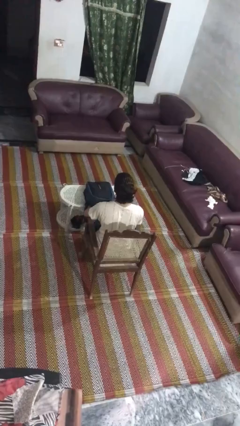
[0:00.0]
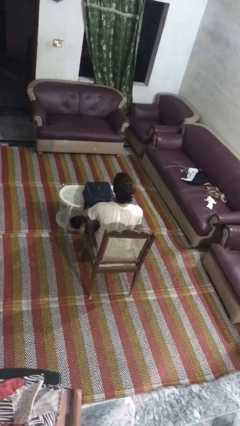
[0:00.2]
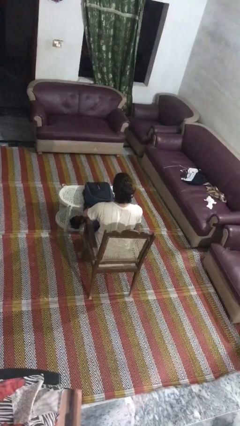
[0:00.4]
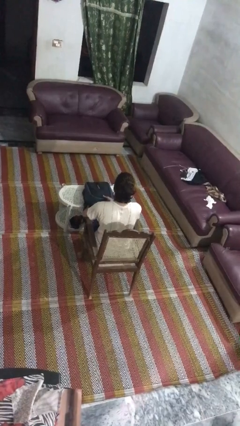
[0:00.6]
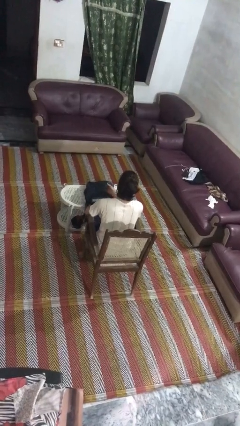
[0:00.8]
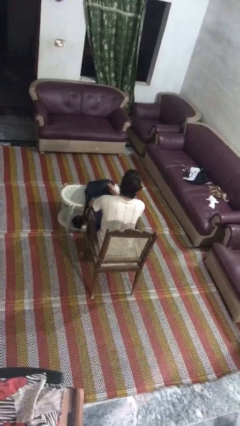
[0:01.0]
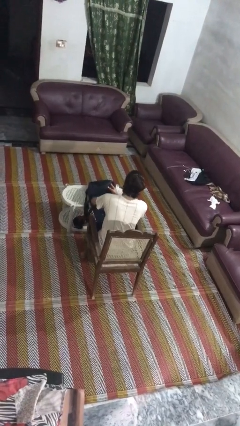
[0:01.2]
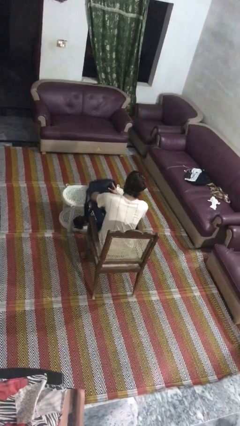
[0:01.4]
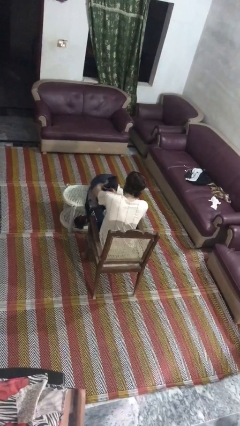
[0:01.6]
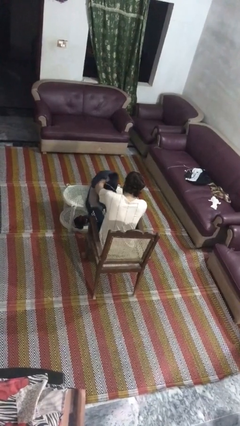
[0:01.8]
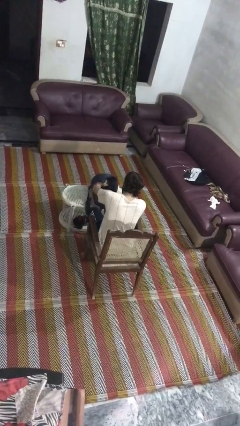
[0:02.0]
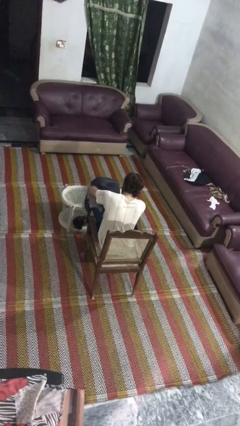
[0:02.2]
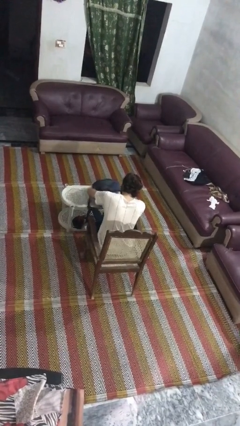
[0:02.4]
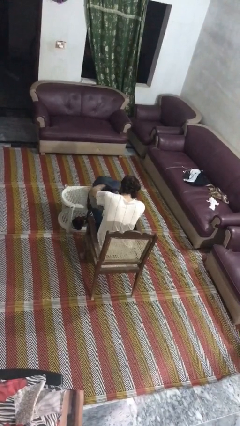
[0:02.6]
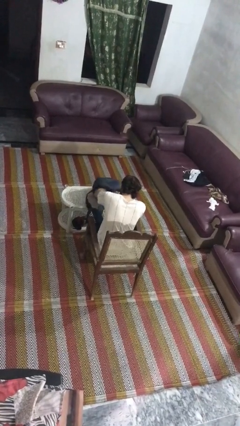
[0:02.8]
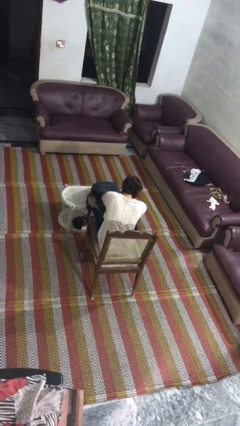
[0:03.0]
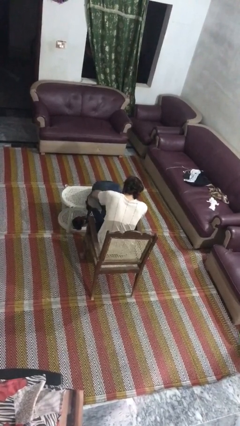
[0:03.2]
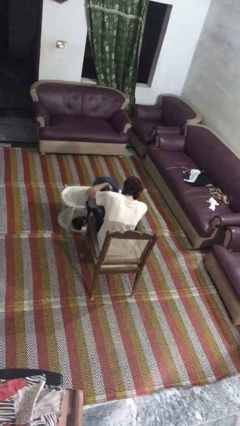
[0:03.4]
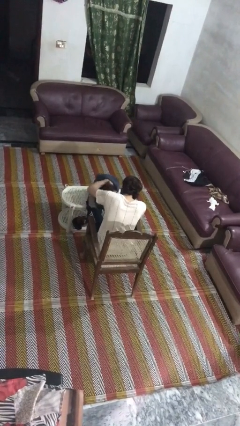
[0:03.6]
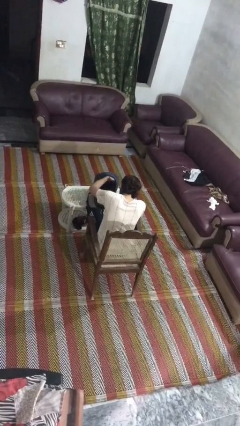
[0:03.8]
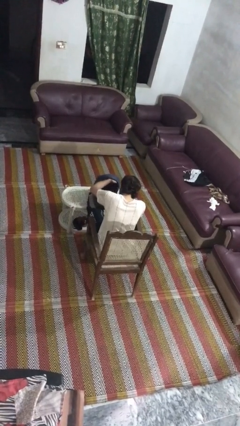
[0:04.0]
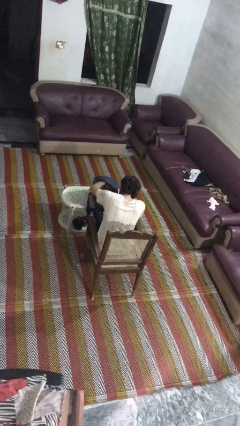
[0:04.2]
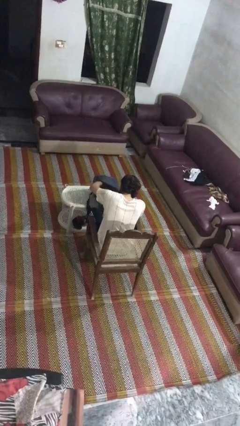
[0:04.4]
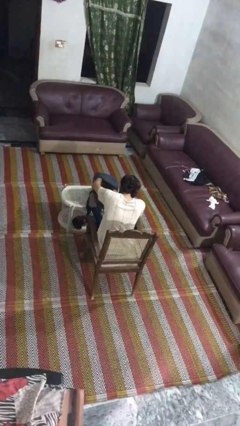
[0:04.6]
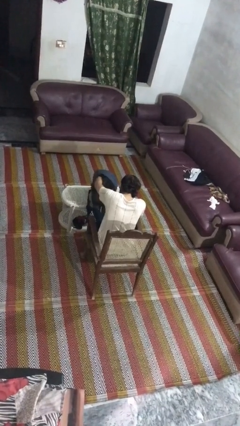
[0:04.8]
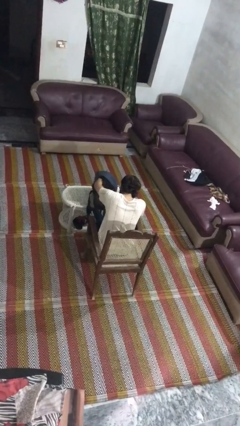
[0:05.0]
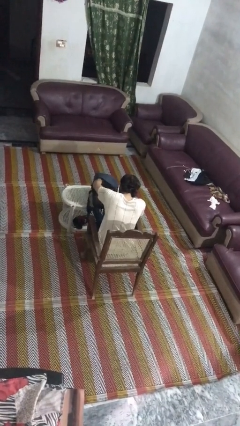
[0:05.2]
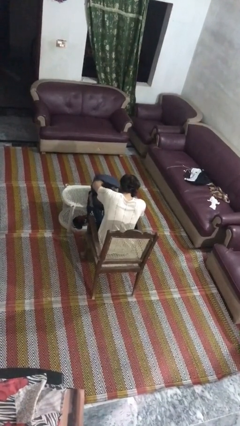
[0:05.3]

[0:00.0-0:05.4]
person searches in backpack

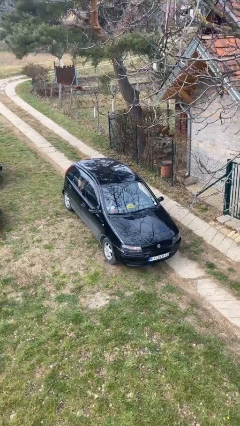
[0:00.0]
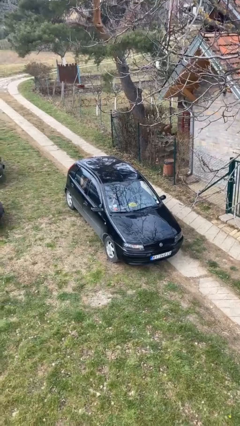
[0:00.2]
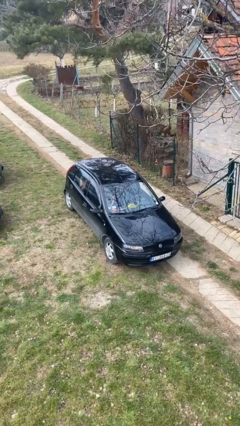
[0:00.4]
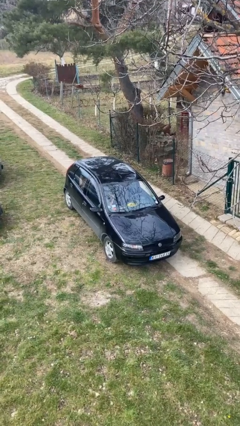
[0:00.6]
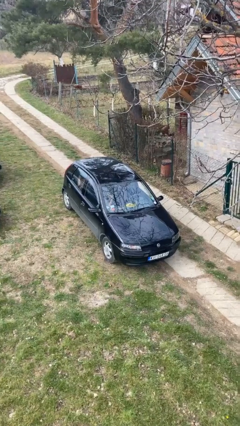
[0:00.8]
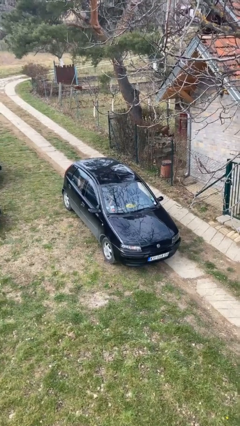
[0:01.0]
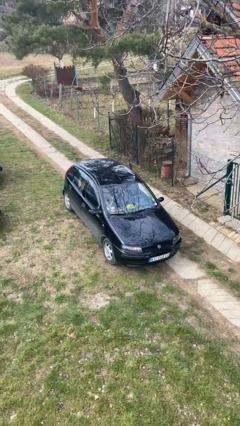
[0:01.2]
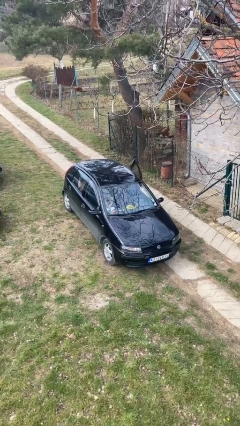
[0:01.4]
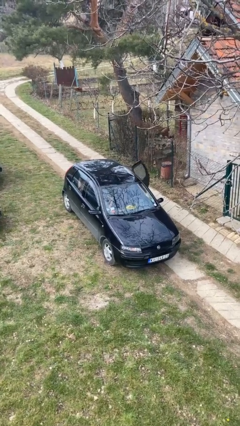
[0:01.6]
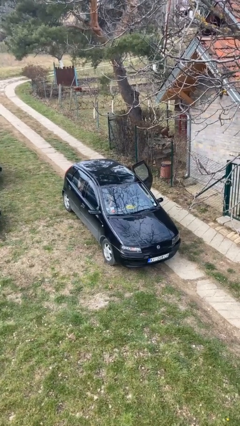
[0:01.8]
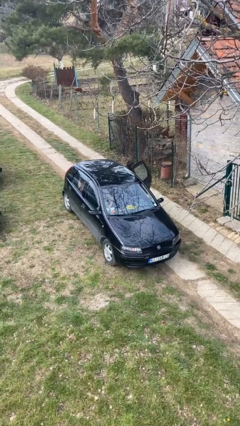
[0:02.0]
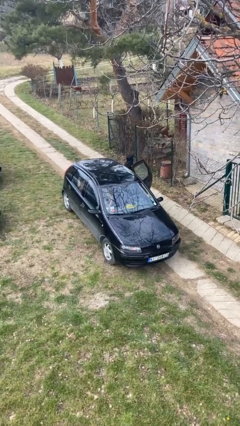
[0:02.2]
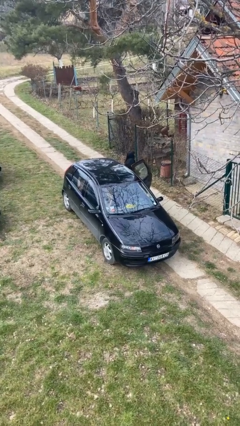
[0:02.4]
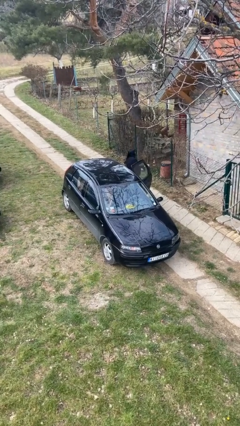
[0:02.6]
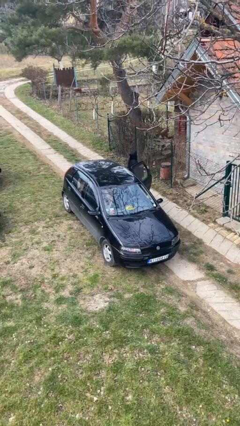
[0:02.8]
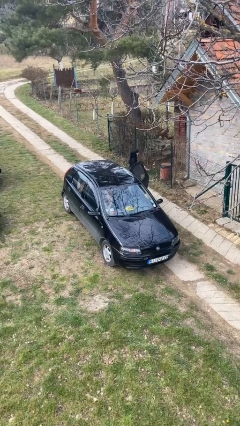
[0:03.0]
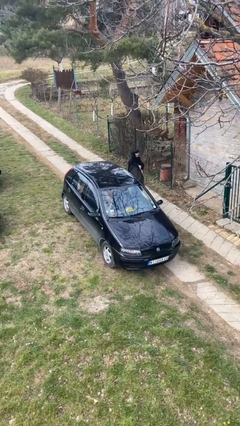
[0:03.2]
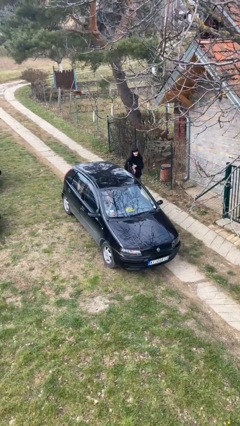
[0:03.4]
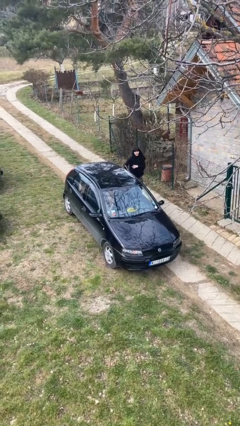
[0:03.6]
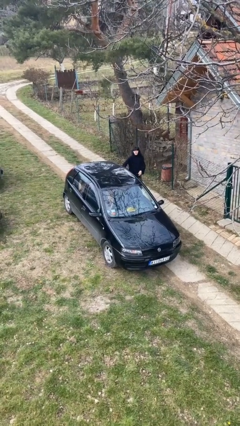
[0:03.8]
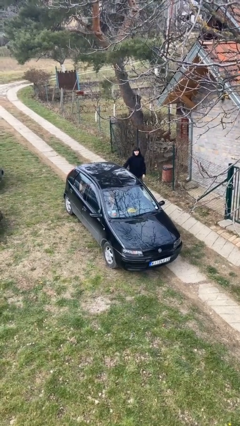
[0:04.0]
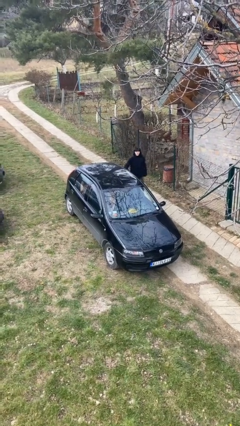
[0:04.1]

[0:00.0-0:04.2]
car drops off person

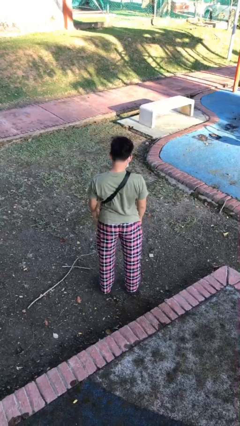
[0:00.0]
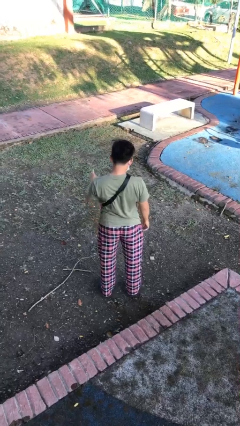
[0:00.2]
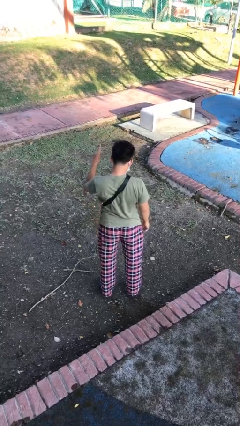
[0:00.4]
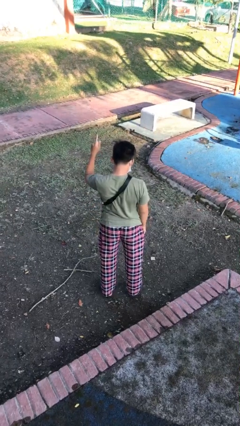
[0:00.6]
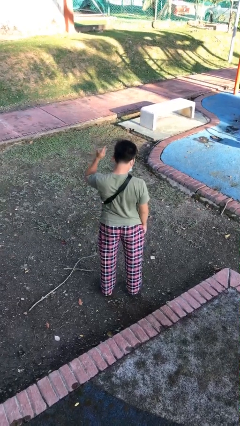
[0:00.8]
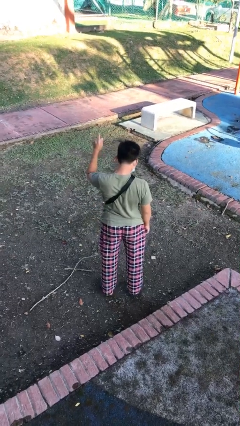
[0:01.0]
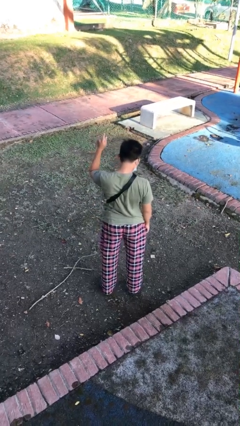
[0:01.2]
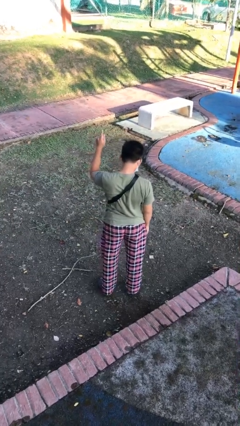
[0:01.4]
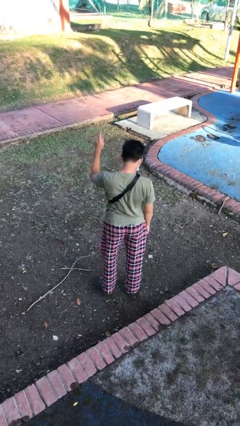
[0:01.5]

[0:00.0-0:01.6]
person gestures number one

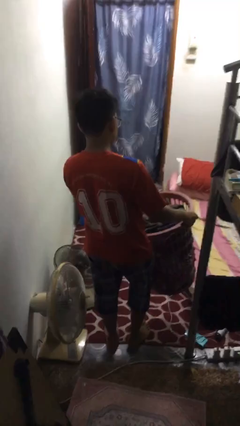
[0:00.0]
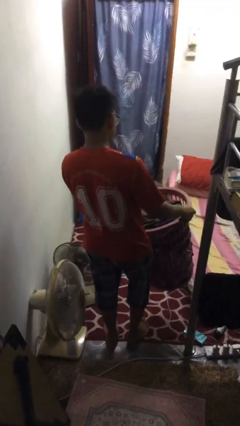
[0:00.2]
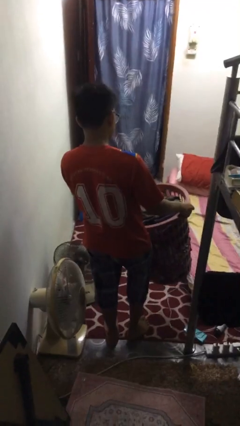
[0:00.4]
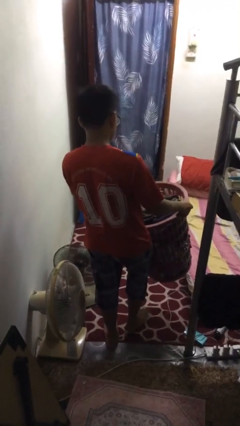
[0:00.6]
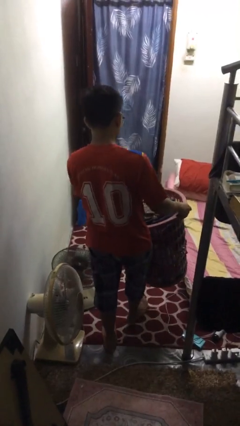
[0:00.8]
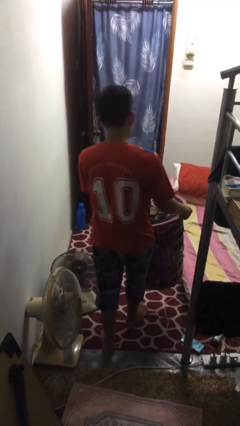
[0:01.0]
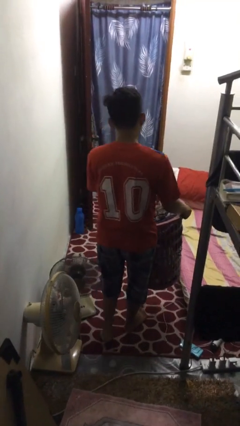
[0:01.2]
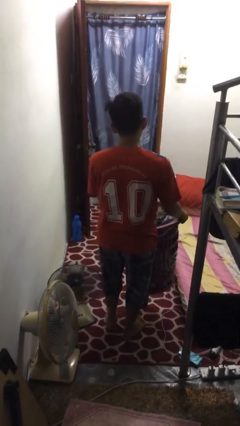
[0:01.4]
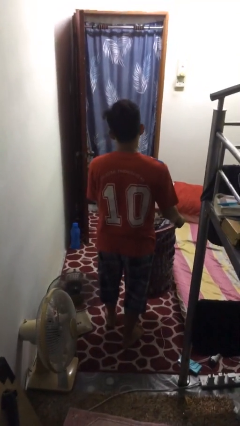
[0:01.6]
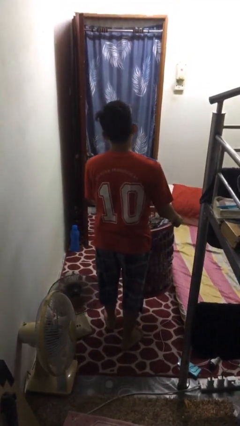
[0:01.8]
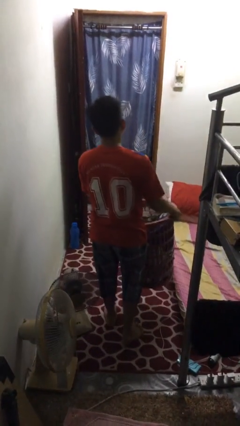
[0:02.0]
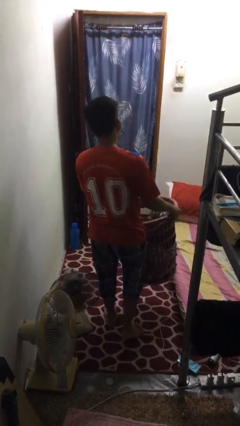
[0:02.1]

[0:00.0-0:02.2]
person carries laundry basket

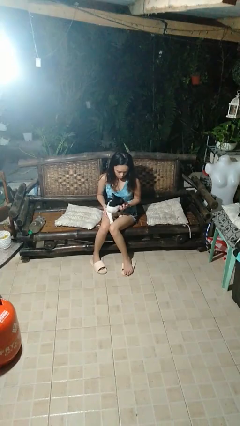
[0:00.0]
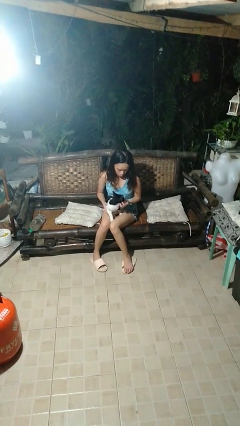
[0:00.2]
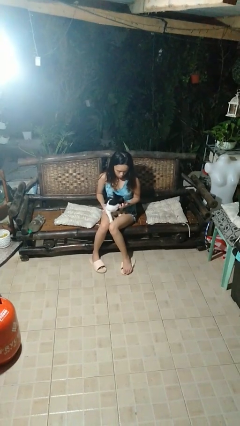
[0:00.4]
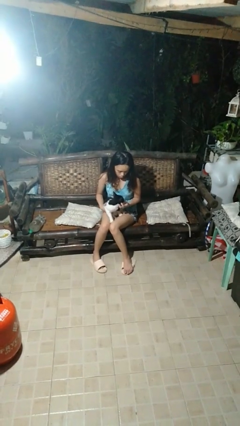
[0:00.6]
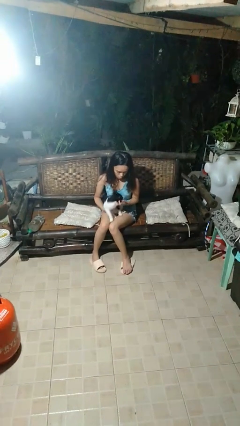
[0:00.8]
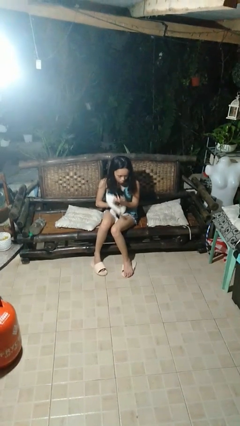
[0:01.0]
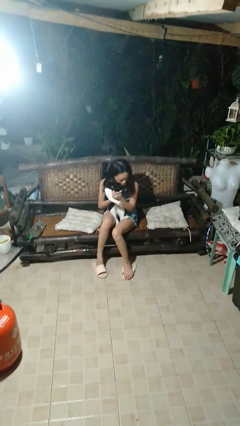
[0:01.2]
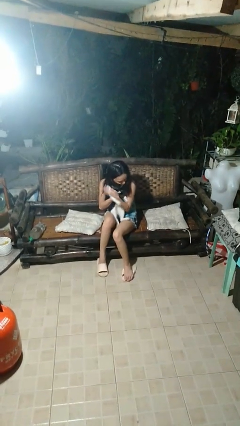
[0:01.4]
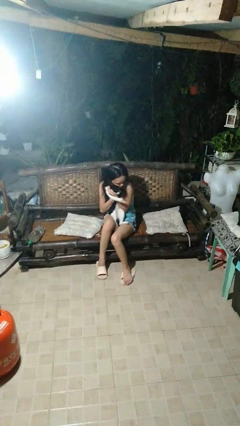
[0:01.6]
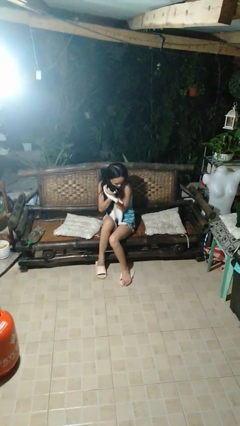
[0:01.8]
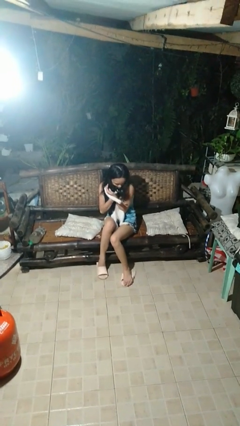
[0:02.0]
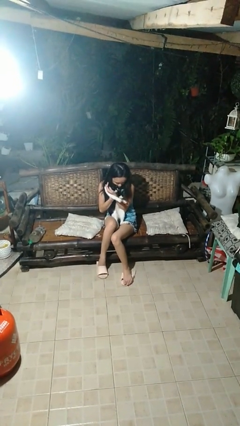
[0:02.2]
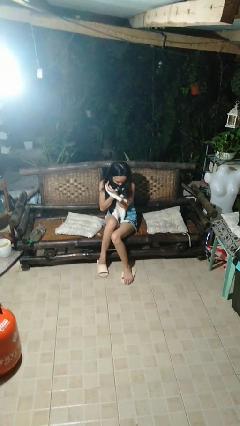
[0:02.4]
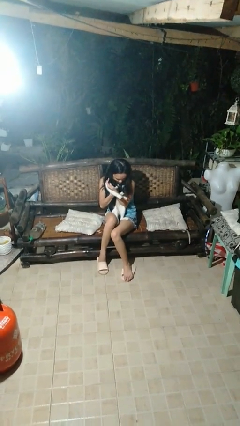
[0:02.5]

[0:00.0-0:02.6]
person hugs cat

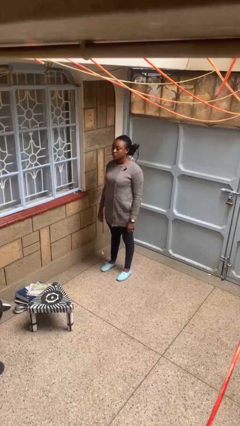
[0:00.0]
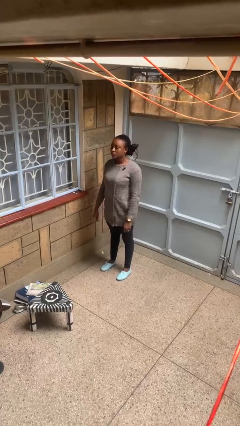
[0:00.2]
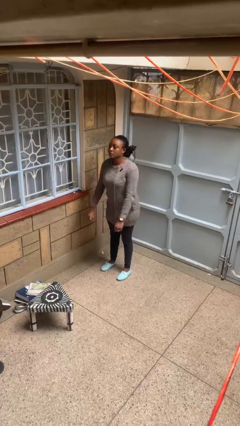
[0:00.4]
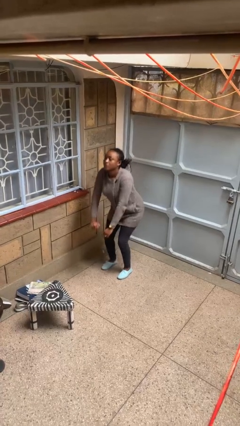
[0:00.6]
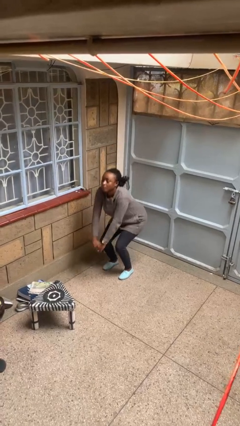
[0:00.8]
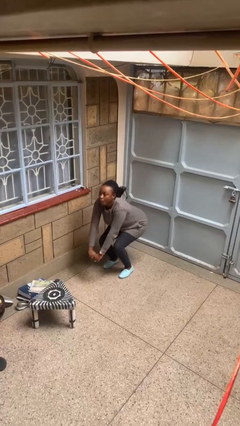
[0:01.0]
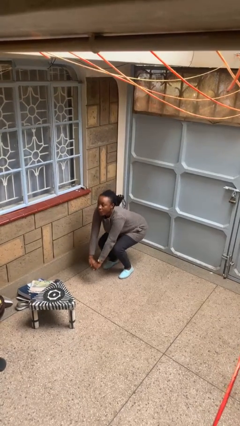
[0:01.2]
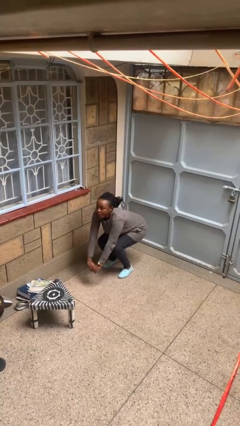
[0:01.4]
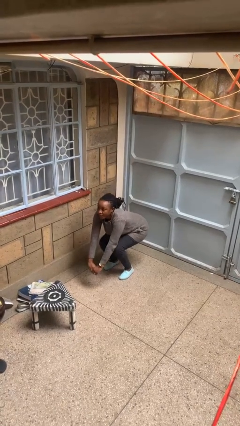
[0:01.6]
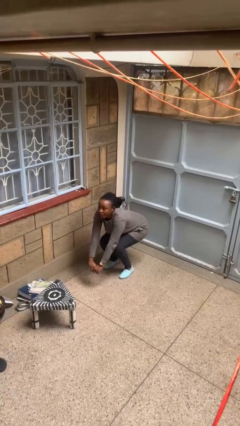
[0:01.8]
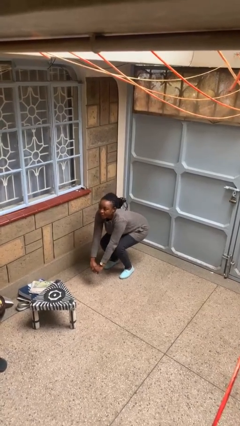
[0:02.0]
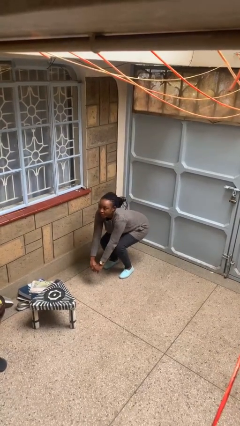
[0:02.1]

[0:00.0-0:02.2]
person squats
